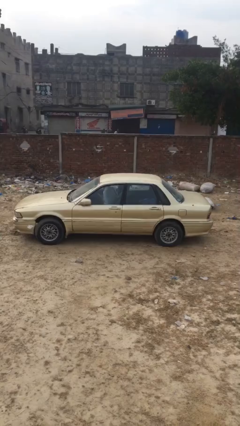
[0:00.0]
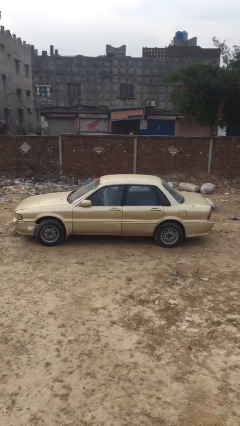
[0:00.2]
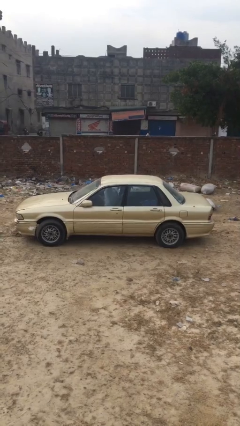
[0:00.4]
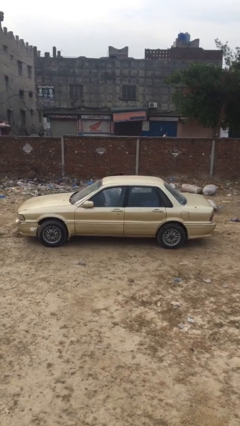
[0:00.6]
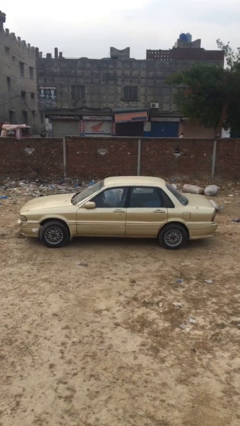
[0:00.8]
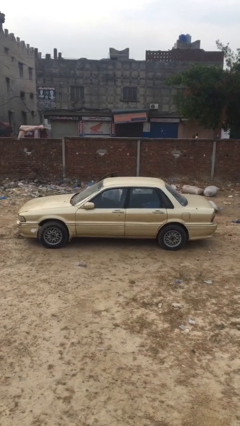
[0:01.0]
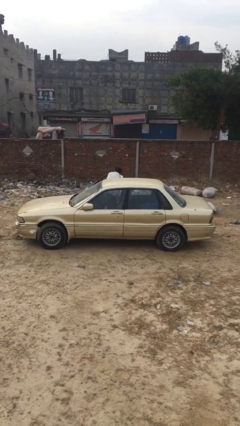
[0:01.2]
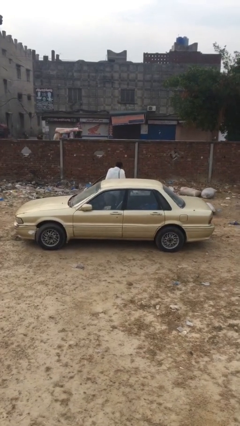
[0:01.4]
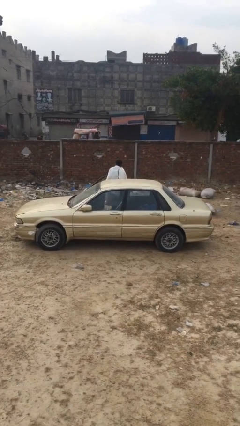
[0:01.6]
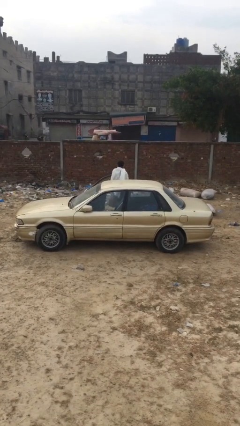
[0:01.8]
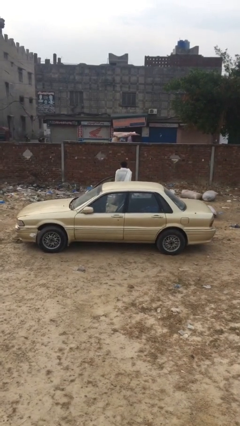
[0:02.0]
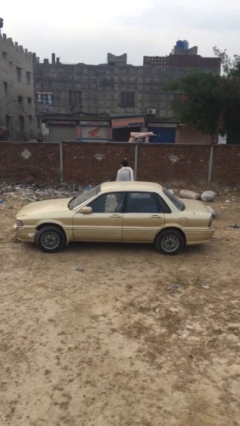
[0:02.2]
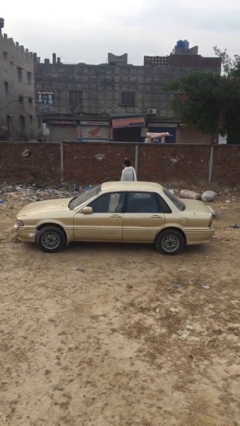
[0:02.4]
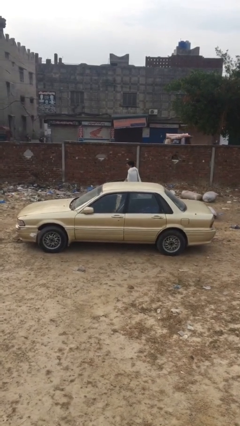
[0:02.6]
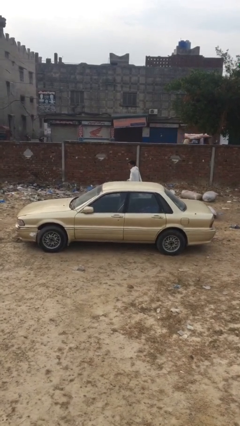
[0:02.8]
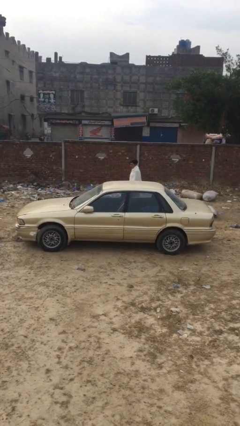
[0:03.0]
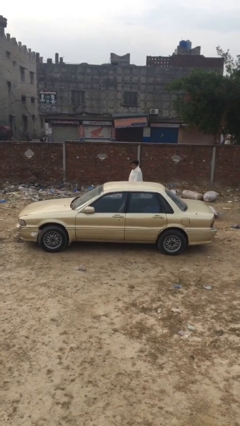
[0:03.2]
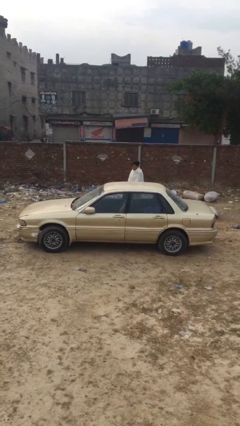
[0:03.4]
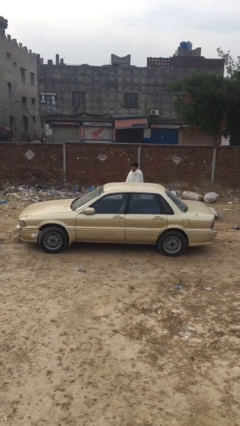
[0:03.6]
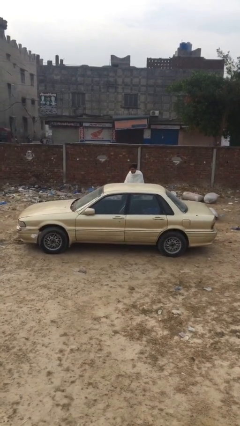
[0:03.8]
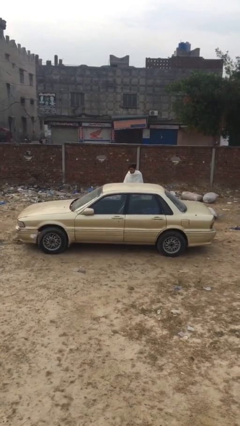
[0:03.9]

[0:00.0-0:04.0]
car drops off person

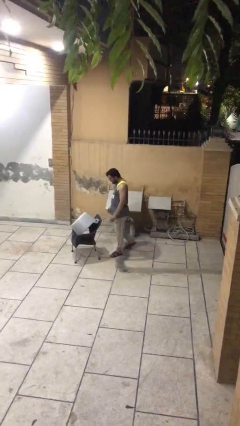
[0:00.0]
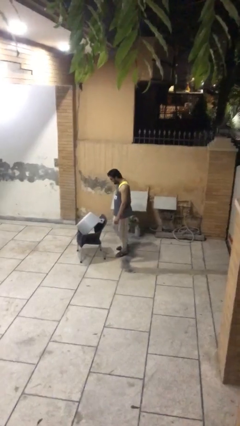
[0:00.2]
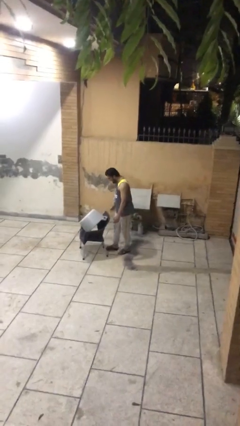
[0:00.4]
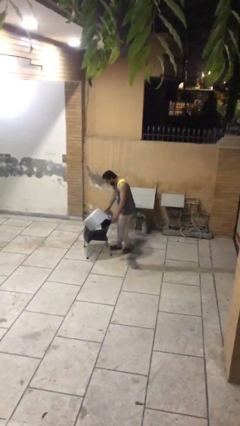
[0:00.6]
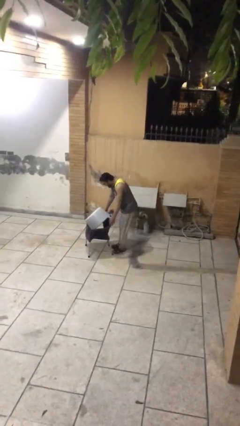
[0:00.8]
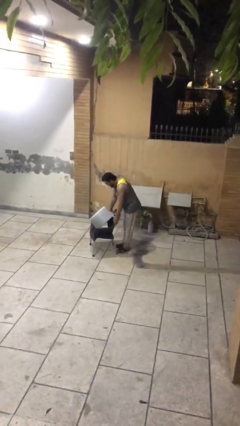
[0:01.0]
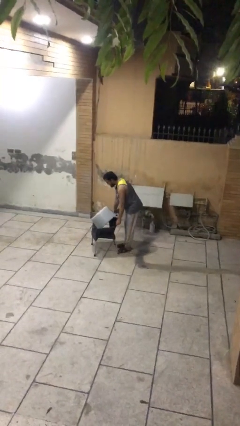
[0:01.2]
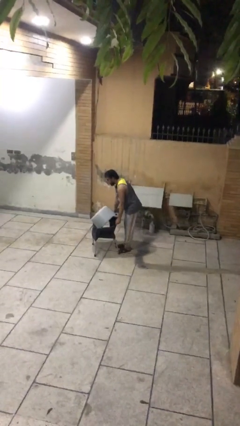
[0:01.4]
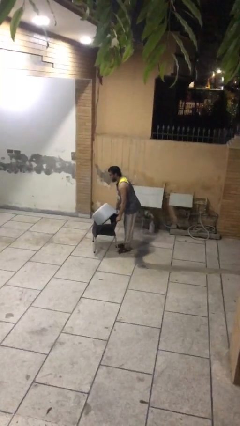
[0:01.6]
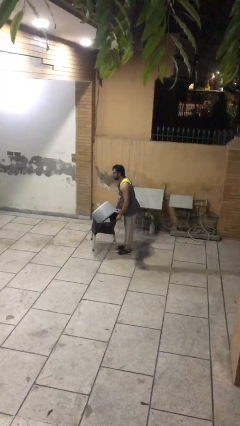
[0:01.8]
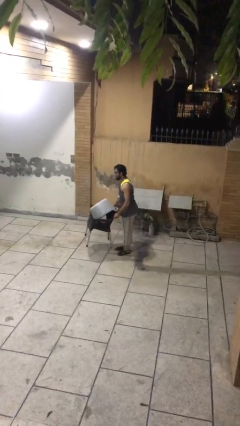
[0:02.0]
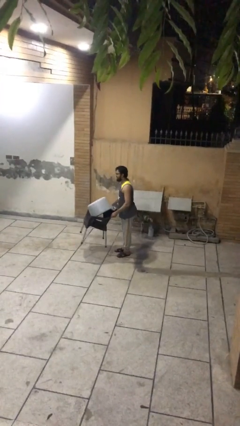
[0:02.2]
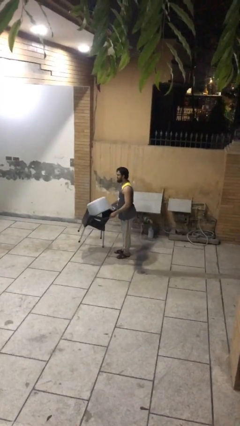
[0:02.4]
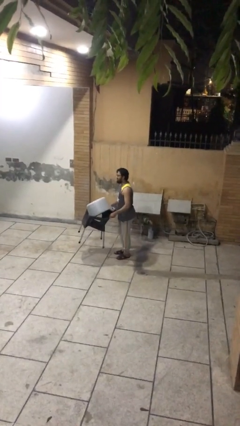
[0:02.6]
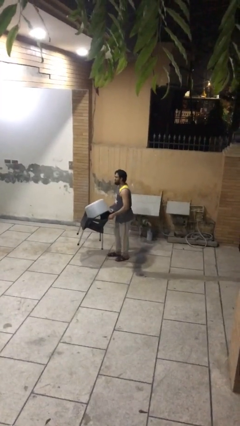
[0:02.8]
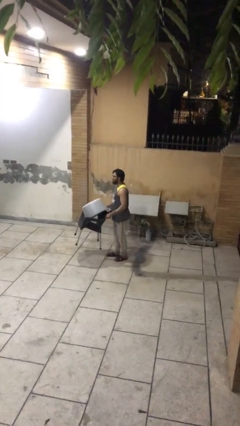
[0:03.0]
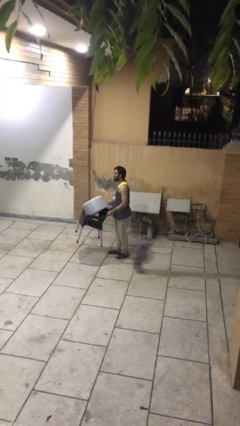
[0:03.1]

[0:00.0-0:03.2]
person picks up object from floor

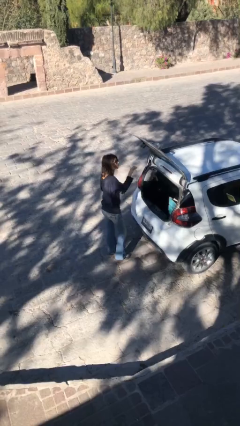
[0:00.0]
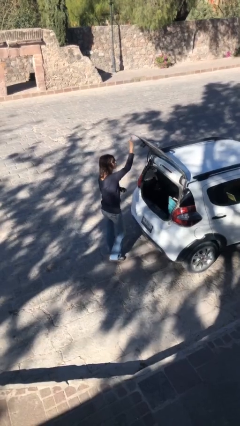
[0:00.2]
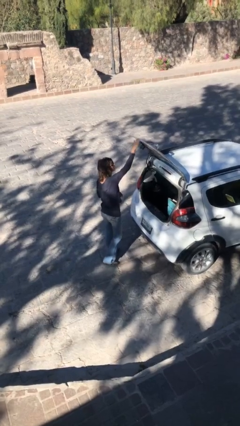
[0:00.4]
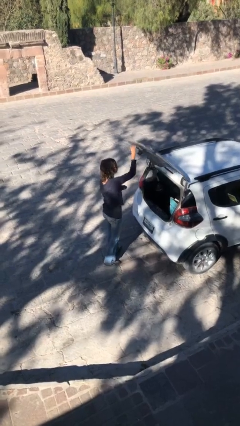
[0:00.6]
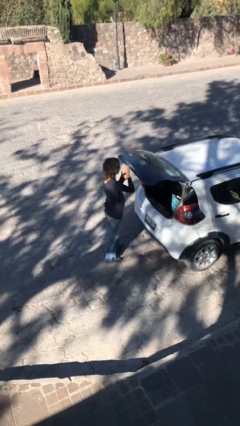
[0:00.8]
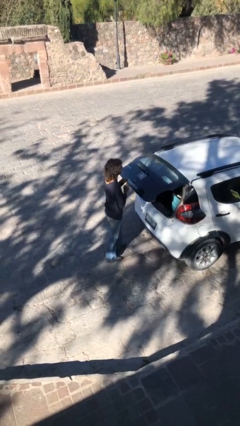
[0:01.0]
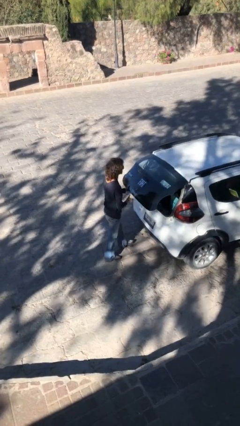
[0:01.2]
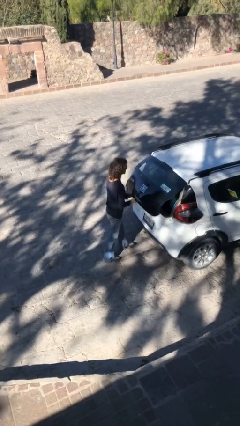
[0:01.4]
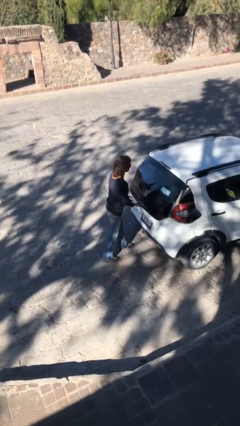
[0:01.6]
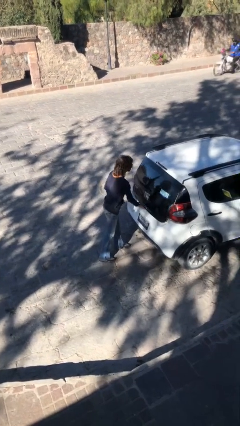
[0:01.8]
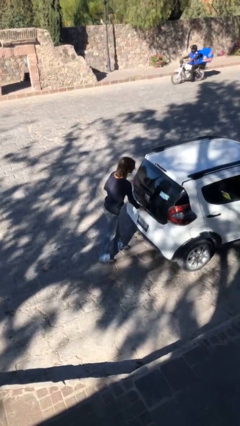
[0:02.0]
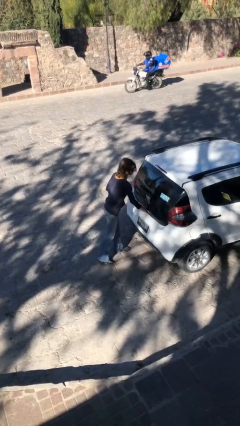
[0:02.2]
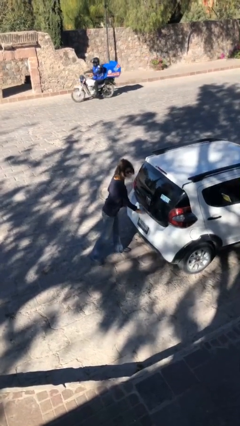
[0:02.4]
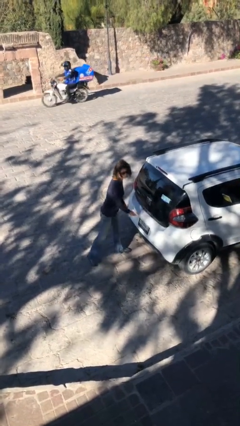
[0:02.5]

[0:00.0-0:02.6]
person closes car trunk

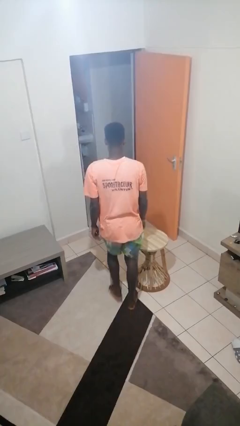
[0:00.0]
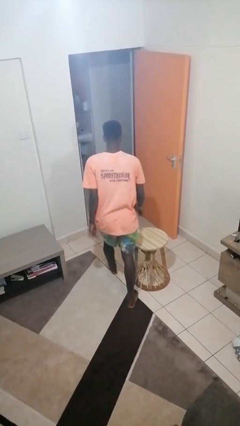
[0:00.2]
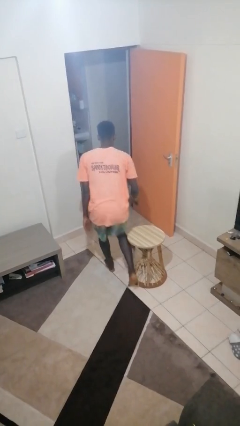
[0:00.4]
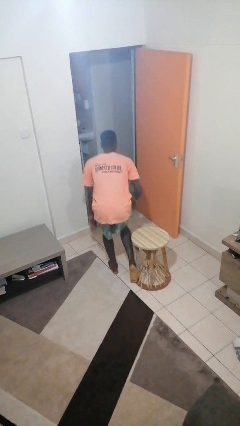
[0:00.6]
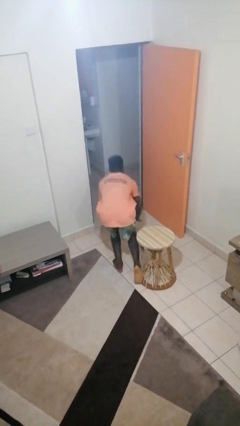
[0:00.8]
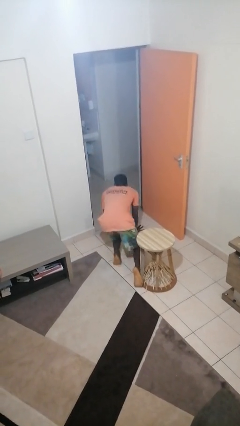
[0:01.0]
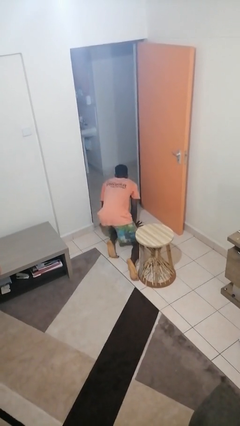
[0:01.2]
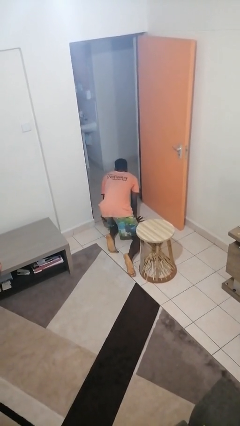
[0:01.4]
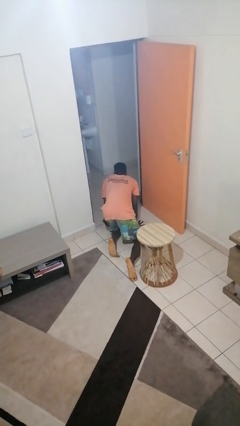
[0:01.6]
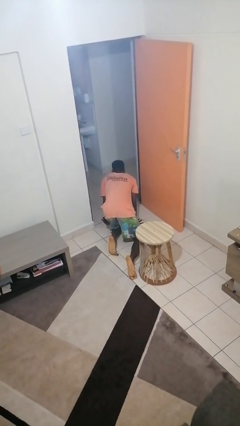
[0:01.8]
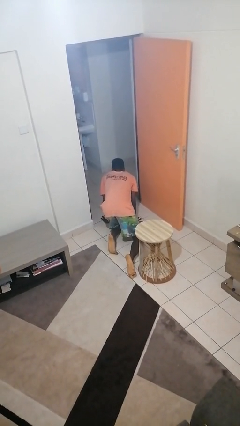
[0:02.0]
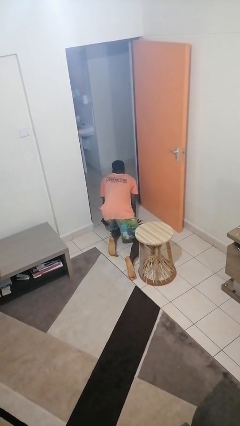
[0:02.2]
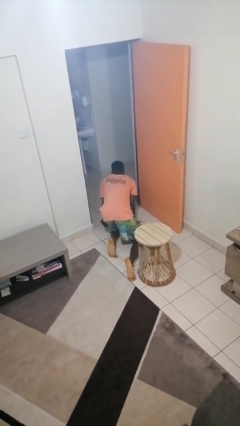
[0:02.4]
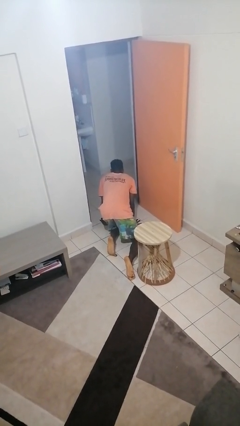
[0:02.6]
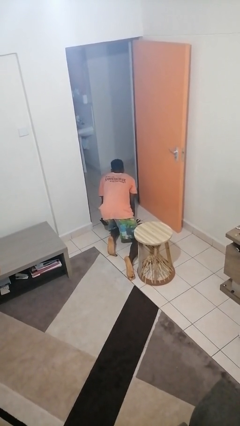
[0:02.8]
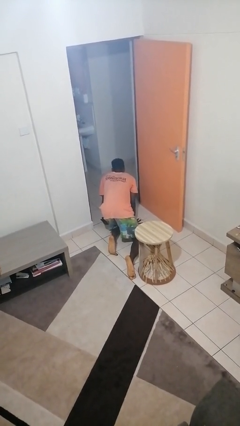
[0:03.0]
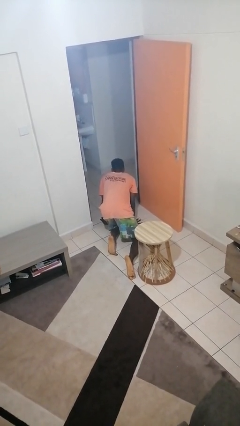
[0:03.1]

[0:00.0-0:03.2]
person trips on object on floor

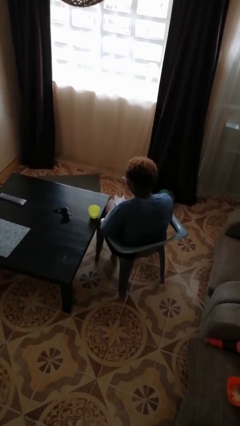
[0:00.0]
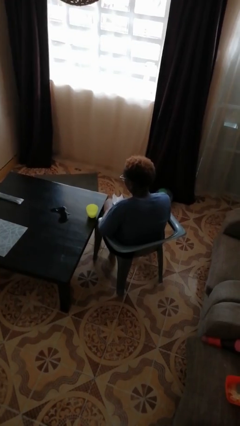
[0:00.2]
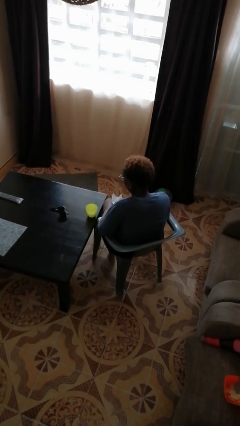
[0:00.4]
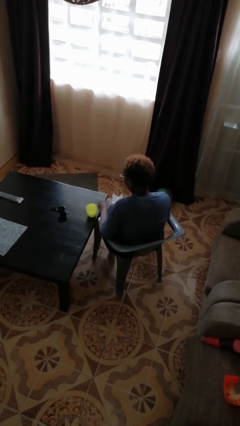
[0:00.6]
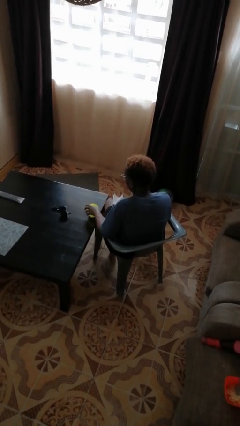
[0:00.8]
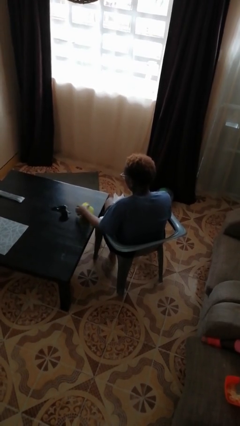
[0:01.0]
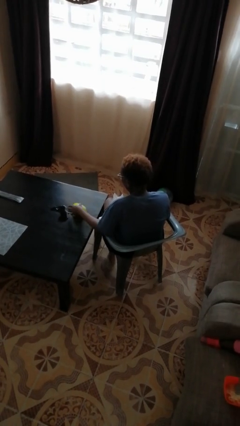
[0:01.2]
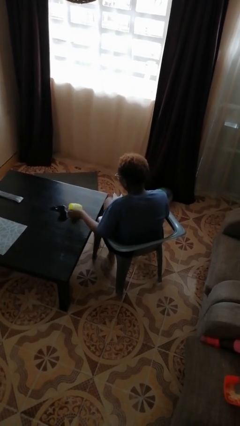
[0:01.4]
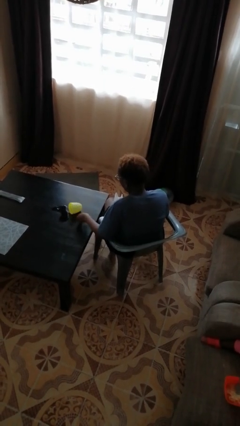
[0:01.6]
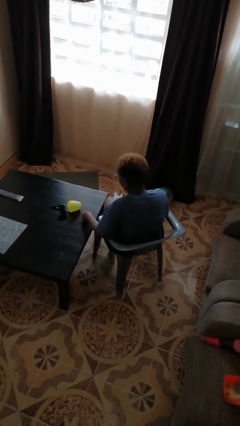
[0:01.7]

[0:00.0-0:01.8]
person spills on table

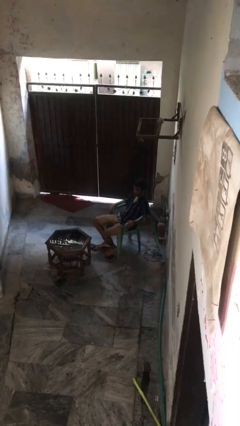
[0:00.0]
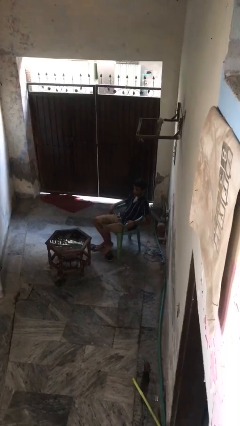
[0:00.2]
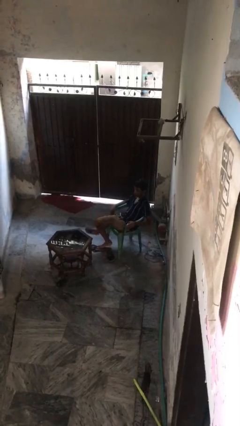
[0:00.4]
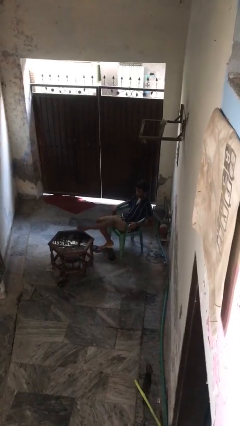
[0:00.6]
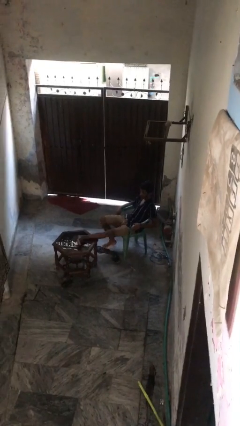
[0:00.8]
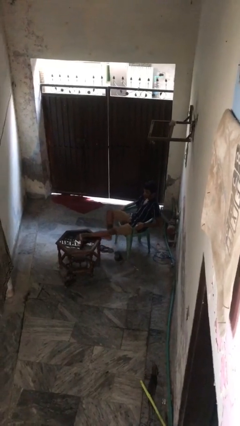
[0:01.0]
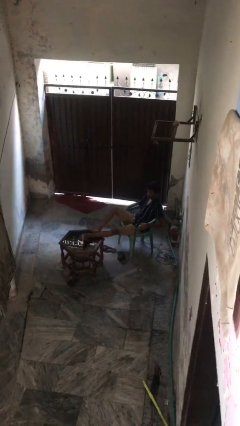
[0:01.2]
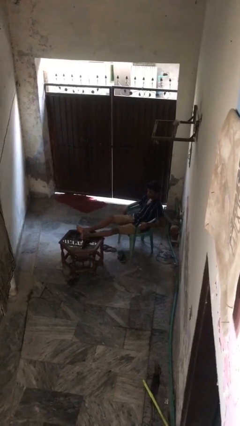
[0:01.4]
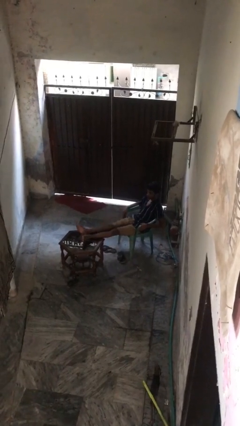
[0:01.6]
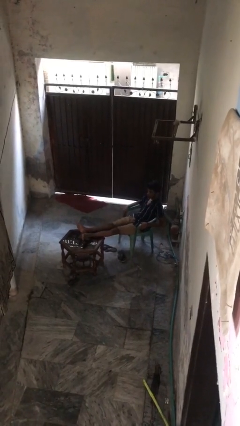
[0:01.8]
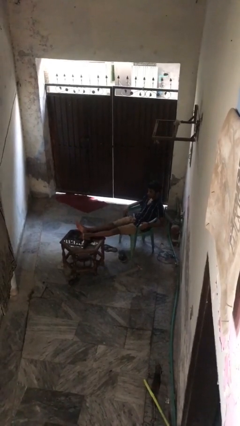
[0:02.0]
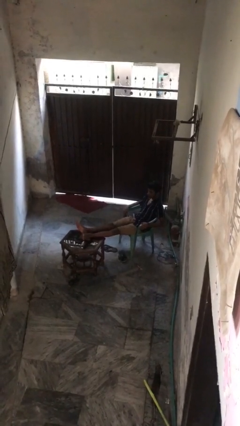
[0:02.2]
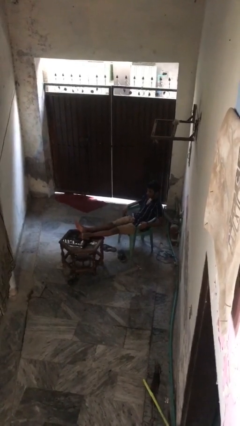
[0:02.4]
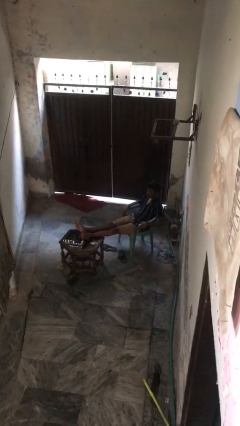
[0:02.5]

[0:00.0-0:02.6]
person puts feet up

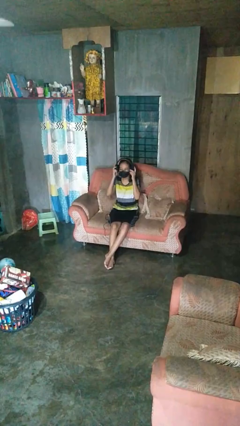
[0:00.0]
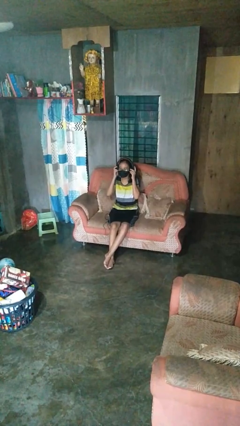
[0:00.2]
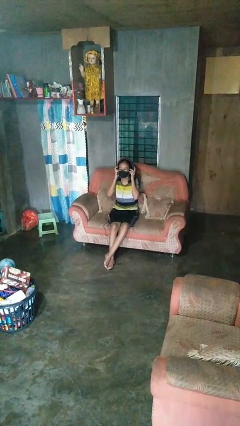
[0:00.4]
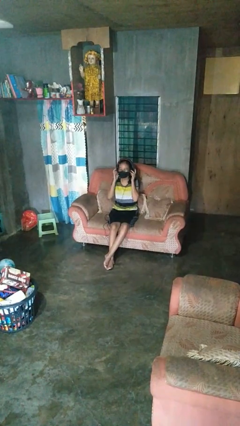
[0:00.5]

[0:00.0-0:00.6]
person puts on headphones
